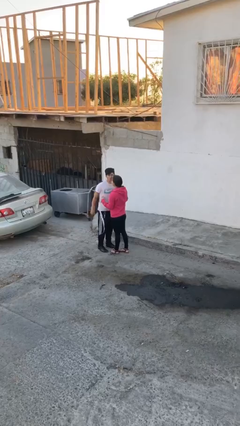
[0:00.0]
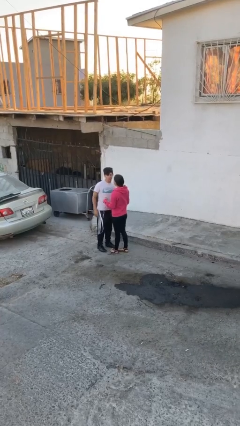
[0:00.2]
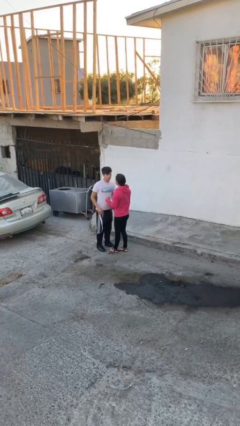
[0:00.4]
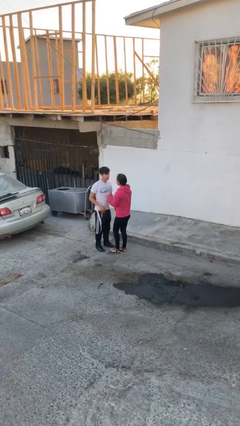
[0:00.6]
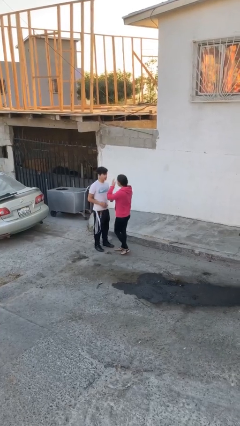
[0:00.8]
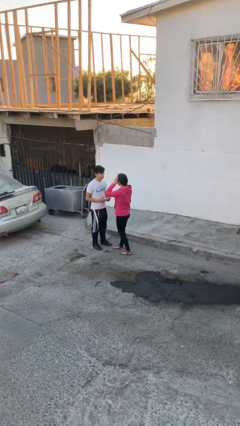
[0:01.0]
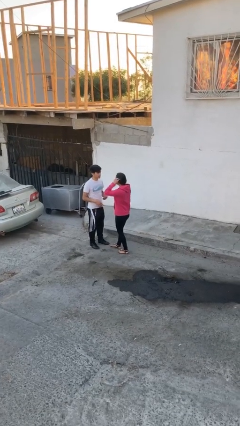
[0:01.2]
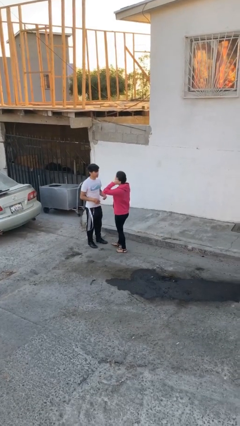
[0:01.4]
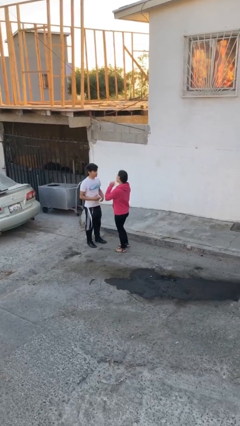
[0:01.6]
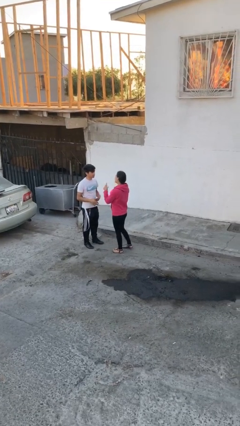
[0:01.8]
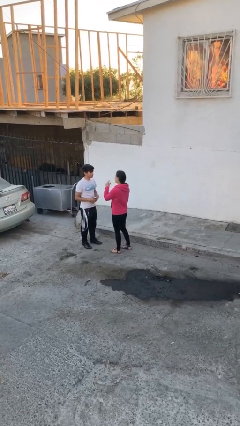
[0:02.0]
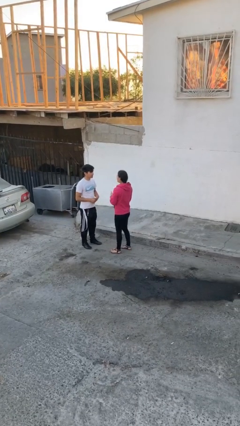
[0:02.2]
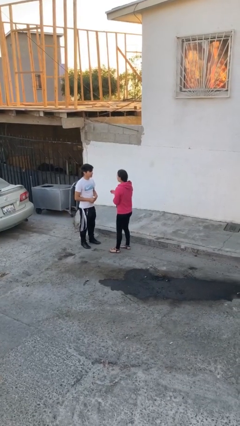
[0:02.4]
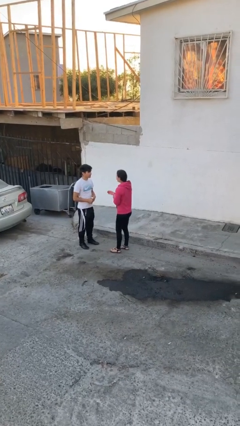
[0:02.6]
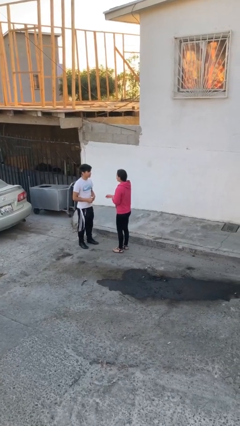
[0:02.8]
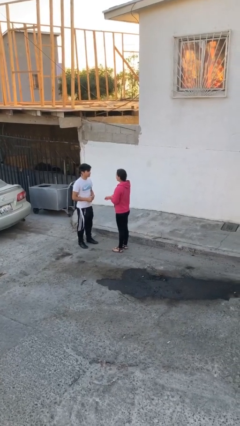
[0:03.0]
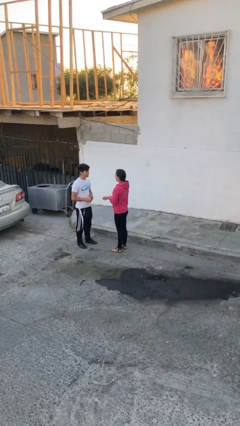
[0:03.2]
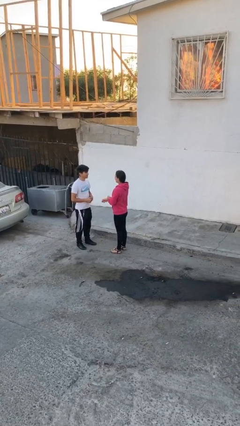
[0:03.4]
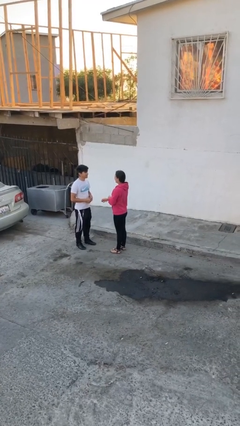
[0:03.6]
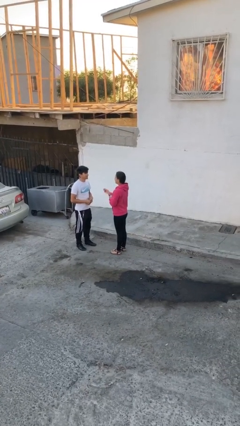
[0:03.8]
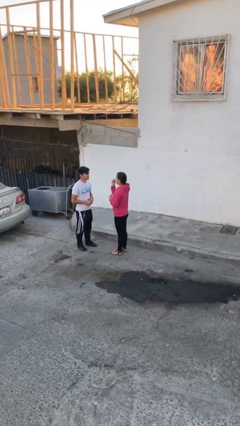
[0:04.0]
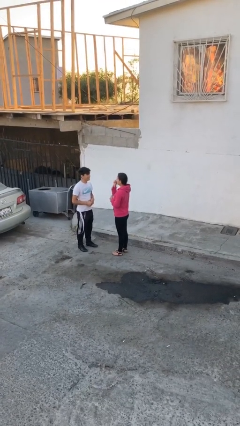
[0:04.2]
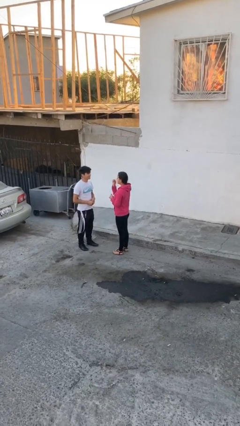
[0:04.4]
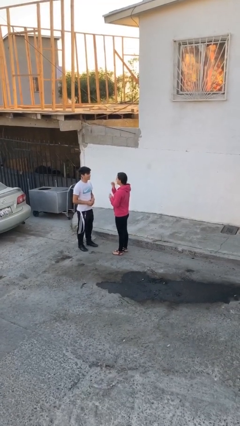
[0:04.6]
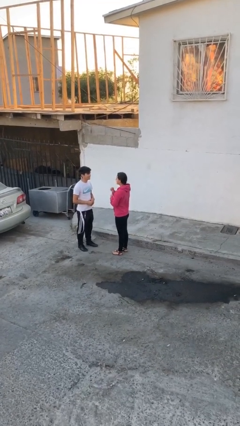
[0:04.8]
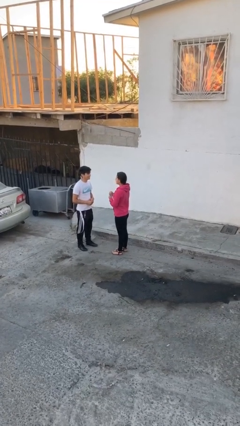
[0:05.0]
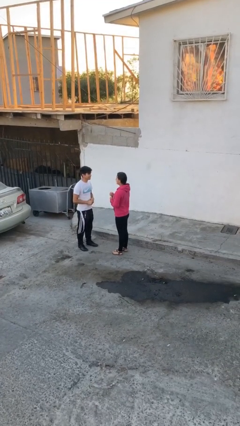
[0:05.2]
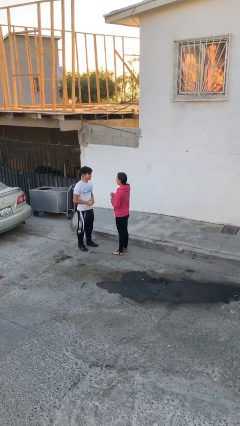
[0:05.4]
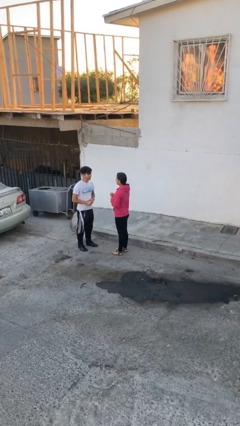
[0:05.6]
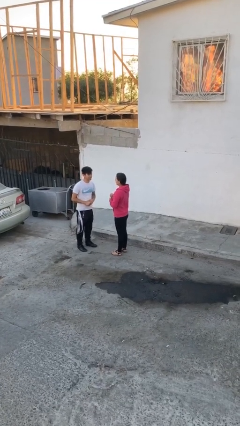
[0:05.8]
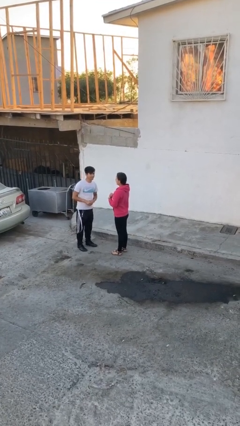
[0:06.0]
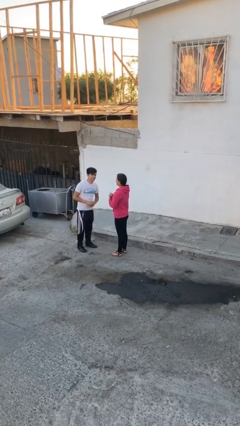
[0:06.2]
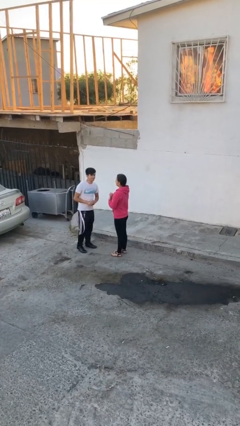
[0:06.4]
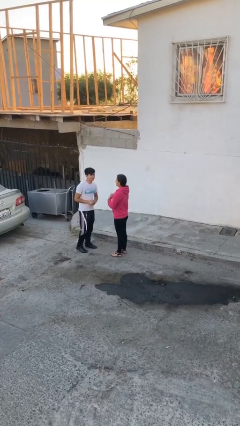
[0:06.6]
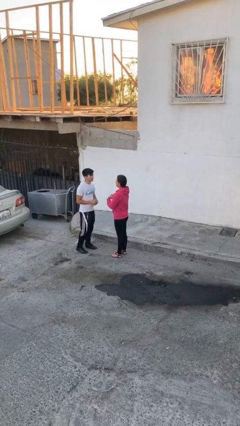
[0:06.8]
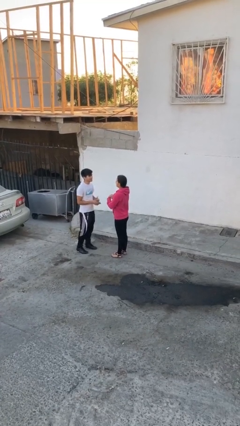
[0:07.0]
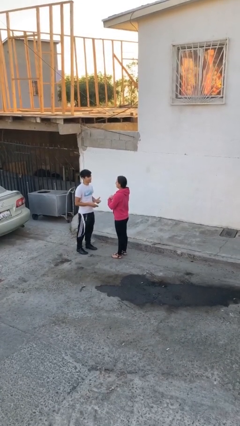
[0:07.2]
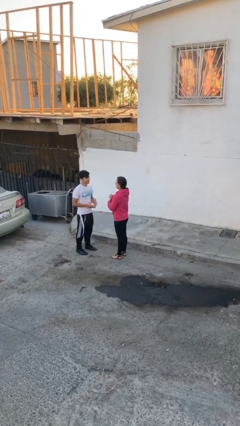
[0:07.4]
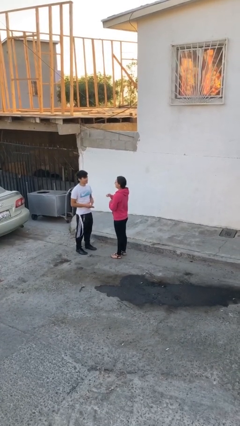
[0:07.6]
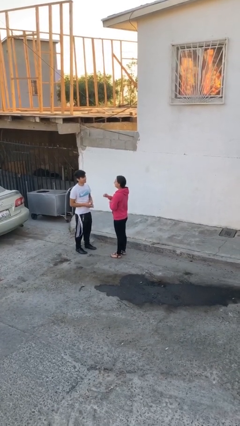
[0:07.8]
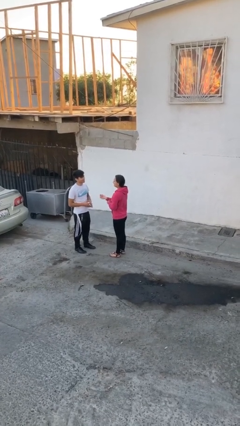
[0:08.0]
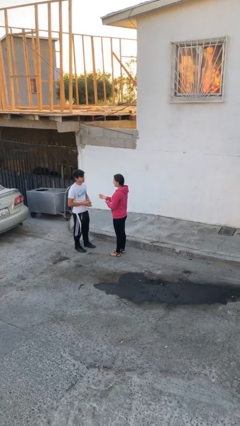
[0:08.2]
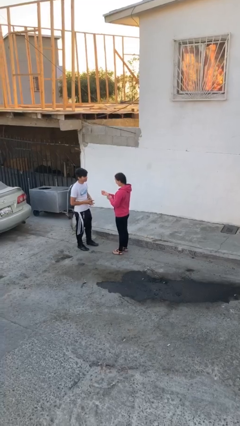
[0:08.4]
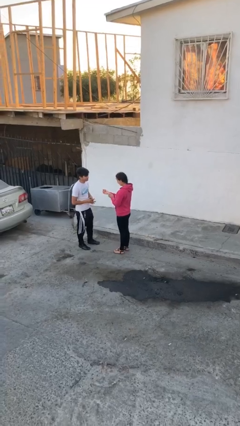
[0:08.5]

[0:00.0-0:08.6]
person talks to person

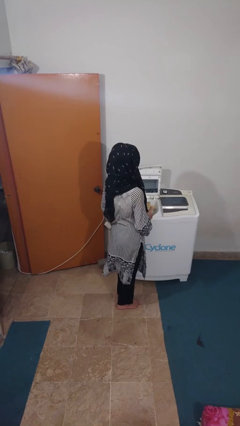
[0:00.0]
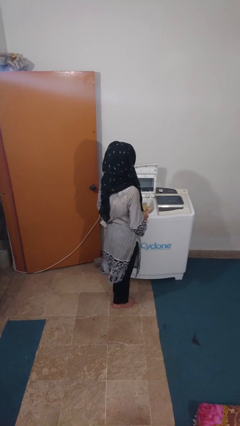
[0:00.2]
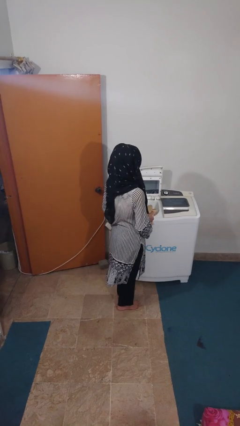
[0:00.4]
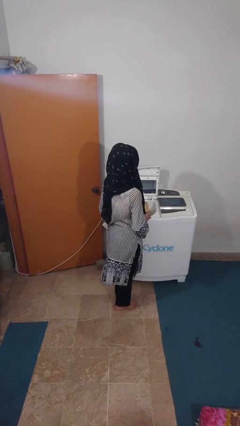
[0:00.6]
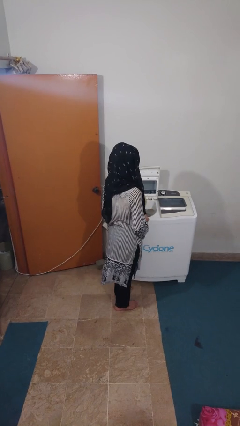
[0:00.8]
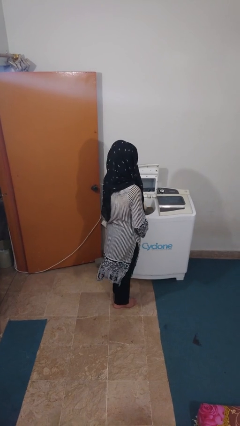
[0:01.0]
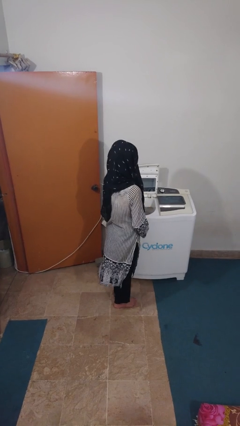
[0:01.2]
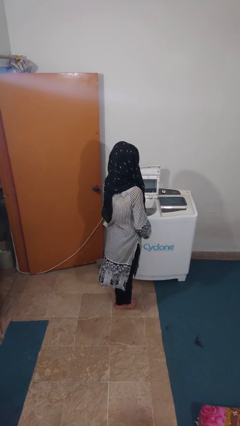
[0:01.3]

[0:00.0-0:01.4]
person loads clotheswasher

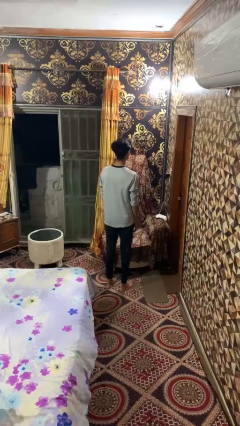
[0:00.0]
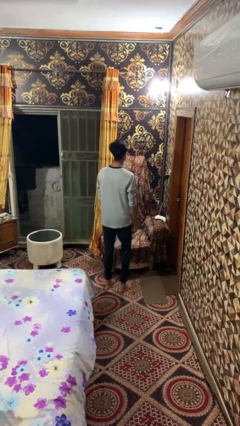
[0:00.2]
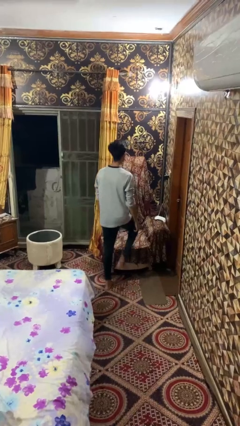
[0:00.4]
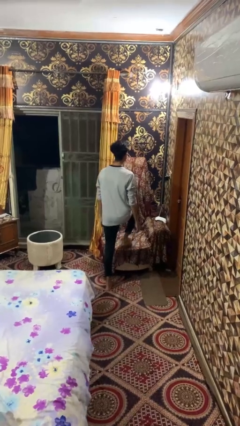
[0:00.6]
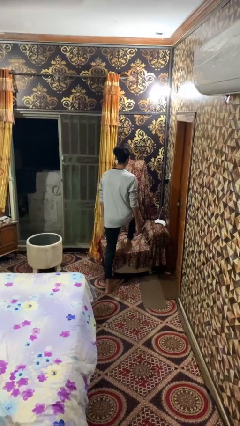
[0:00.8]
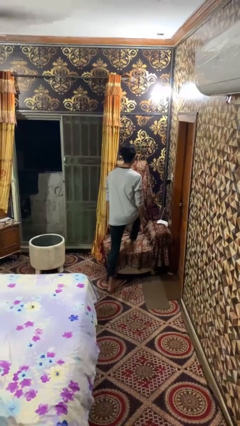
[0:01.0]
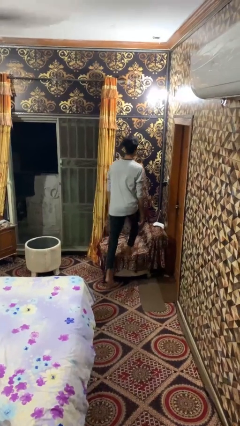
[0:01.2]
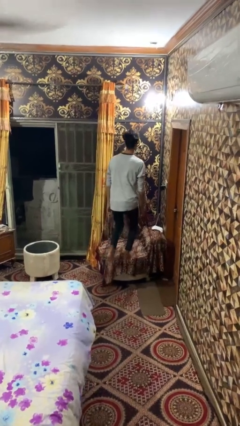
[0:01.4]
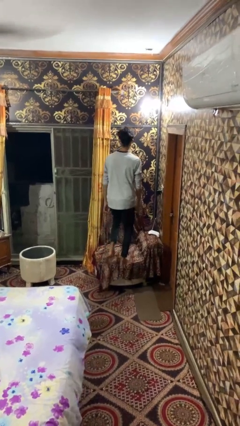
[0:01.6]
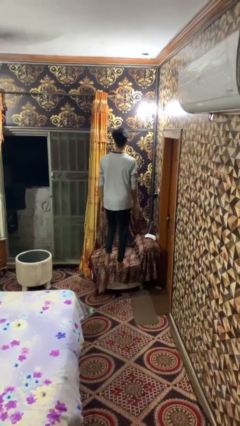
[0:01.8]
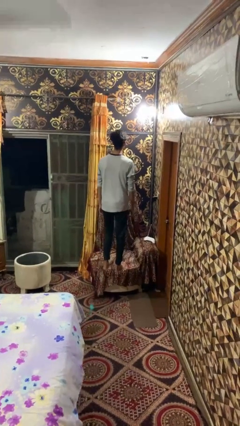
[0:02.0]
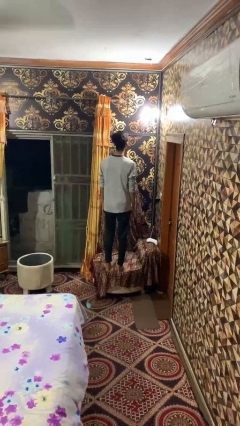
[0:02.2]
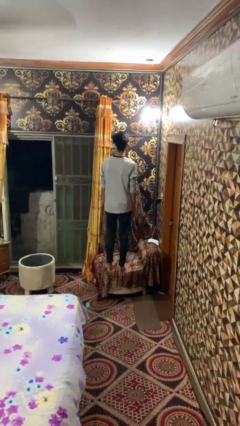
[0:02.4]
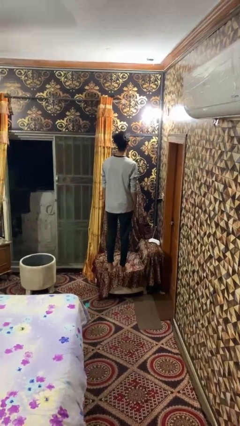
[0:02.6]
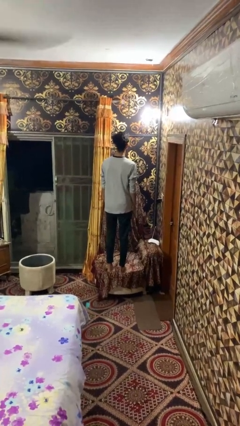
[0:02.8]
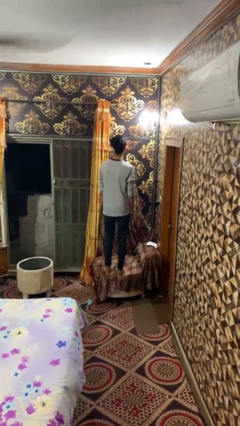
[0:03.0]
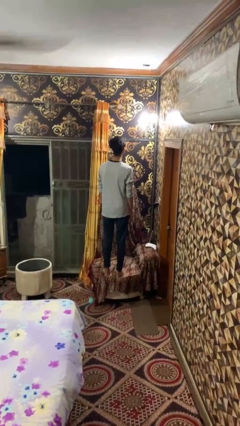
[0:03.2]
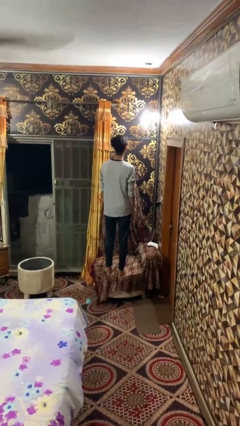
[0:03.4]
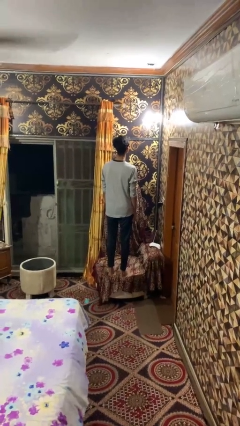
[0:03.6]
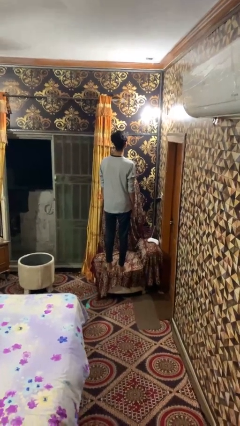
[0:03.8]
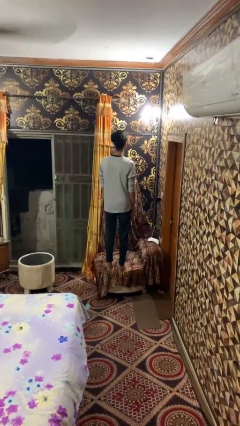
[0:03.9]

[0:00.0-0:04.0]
person climbs on couch

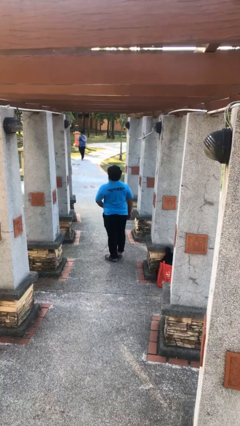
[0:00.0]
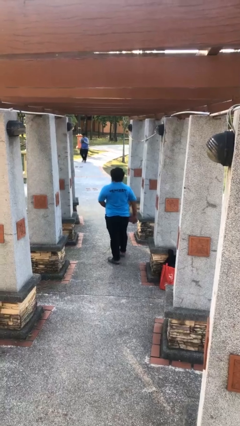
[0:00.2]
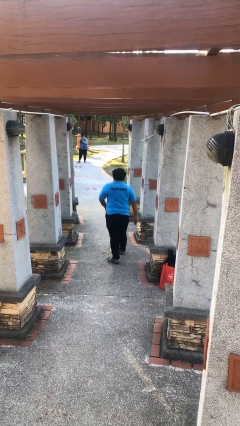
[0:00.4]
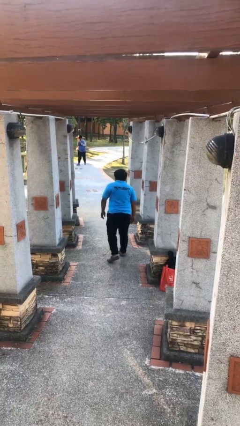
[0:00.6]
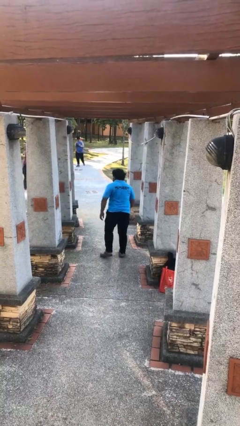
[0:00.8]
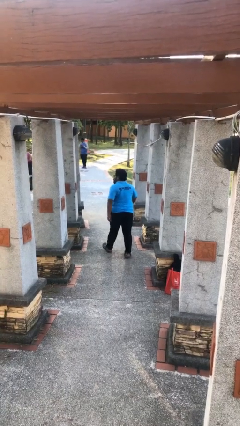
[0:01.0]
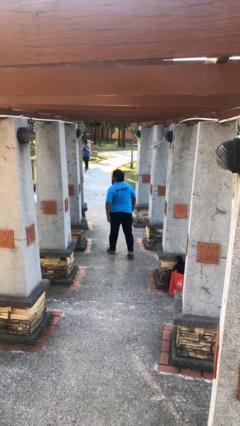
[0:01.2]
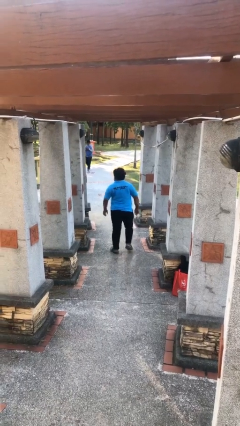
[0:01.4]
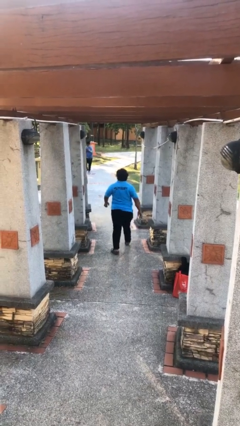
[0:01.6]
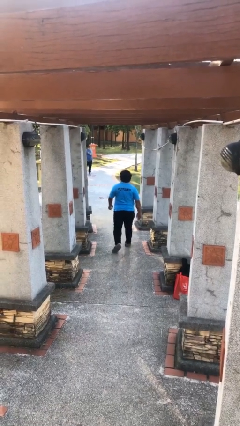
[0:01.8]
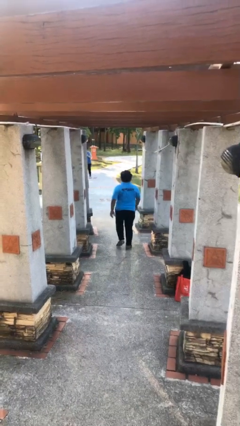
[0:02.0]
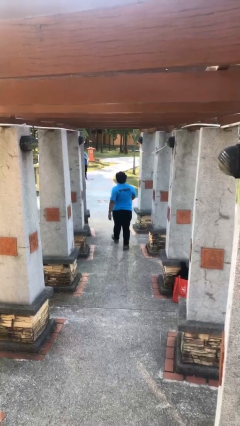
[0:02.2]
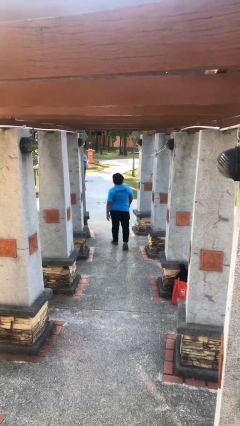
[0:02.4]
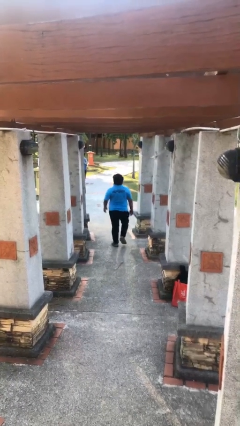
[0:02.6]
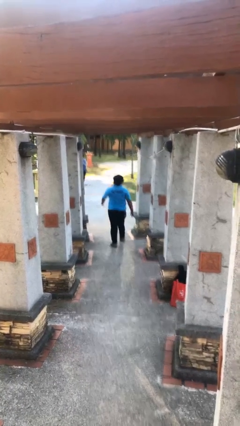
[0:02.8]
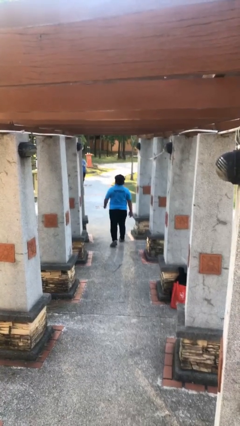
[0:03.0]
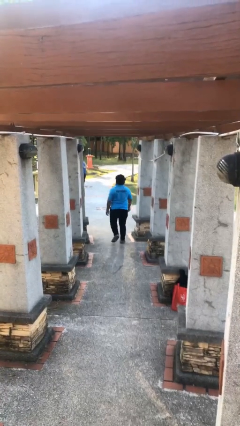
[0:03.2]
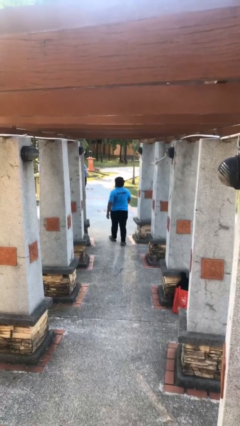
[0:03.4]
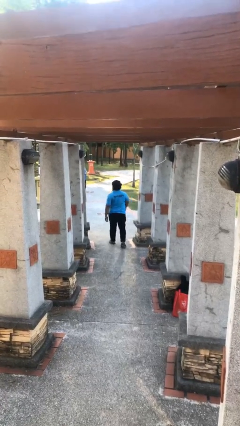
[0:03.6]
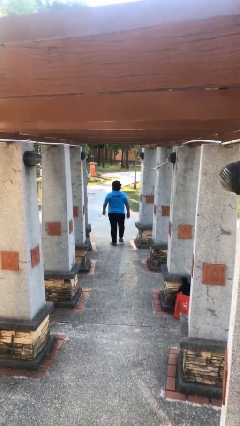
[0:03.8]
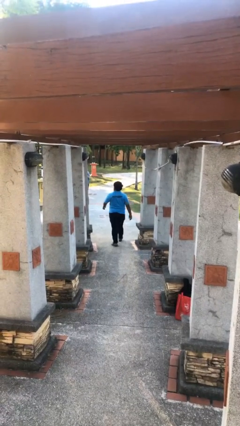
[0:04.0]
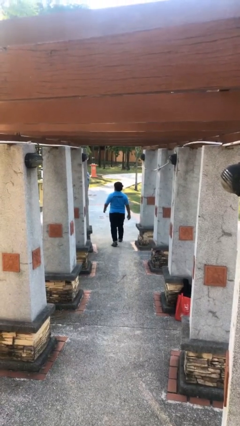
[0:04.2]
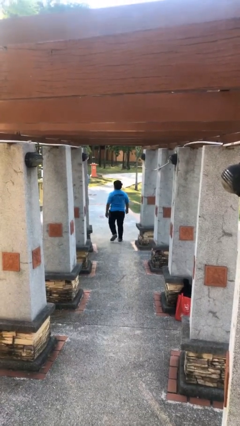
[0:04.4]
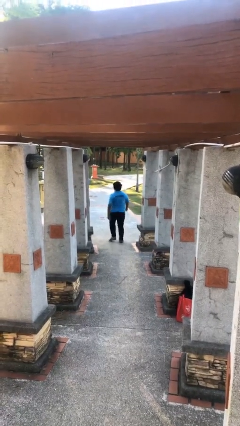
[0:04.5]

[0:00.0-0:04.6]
person exits scene through structure
